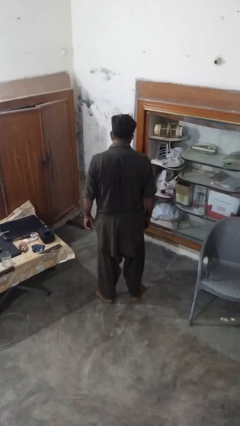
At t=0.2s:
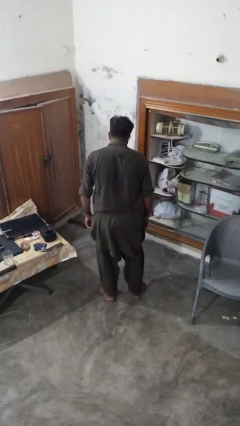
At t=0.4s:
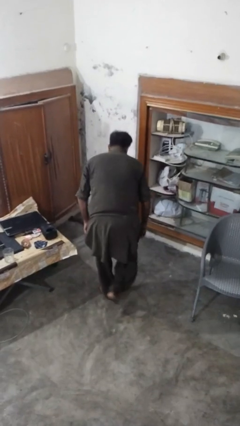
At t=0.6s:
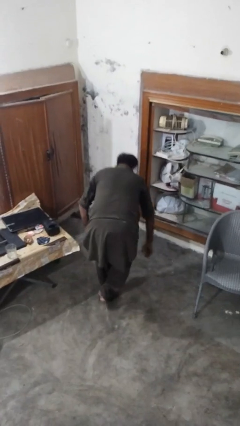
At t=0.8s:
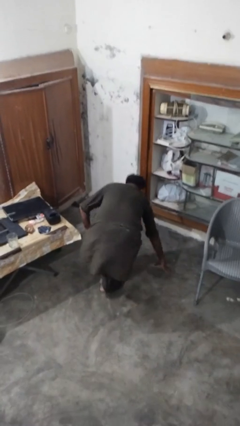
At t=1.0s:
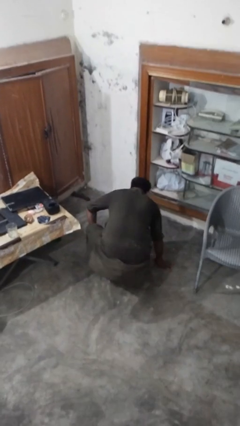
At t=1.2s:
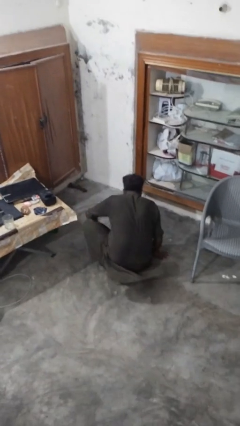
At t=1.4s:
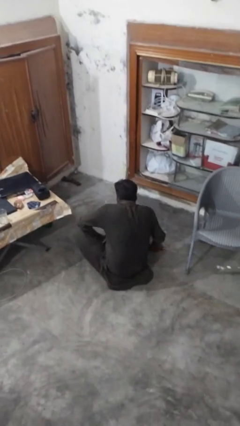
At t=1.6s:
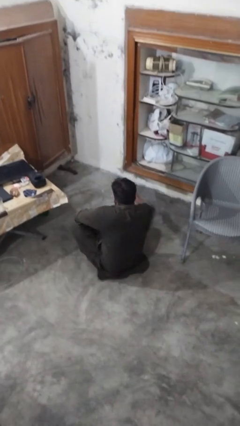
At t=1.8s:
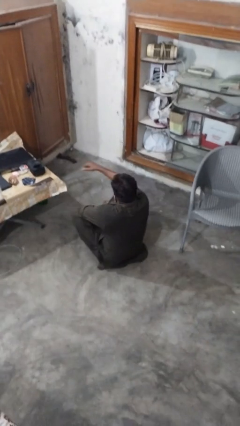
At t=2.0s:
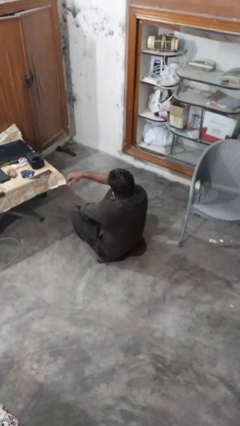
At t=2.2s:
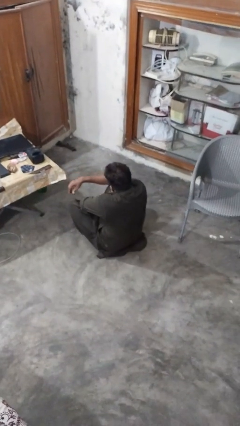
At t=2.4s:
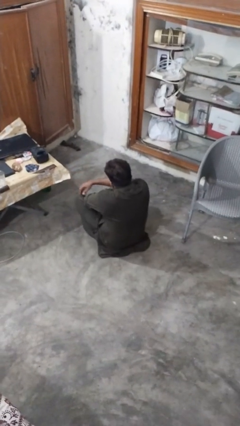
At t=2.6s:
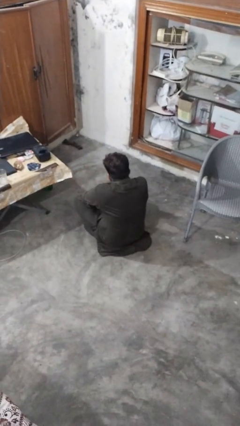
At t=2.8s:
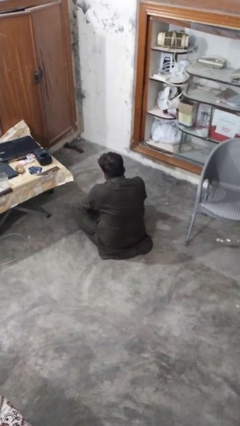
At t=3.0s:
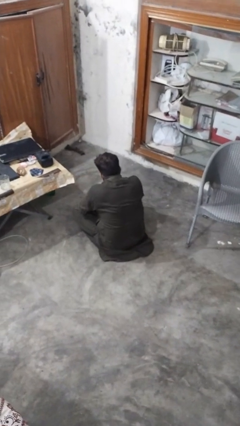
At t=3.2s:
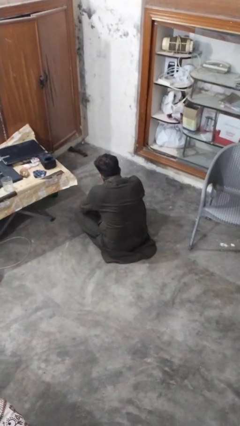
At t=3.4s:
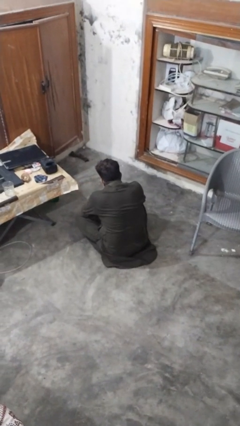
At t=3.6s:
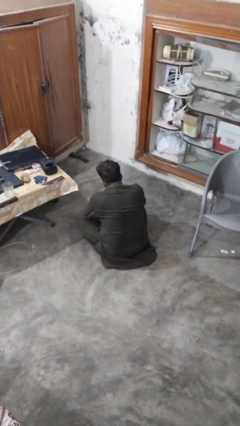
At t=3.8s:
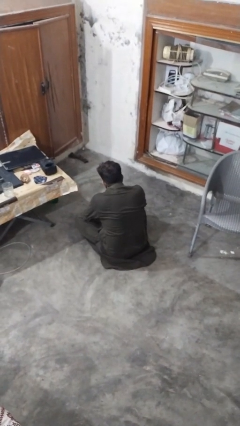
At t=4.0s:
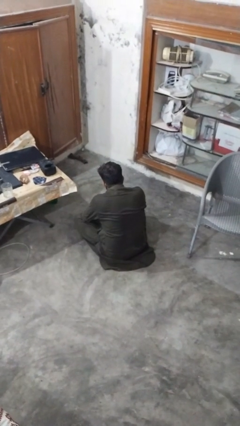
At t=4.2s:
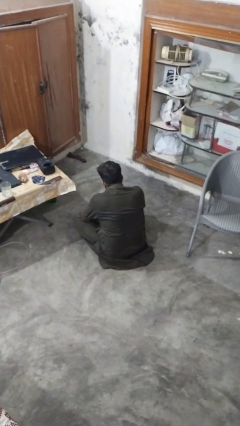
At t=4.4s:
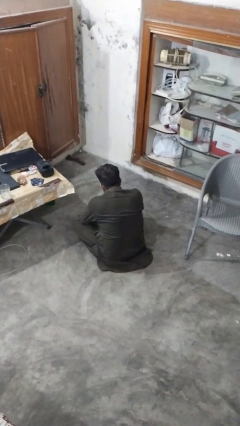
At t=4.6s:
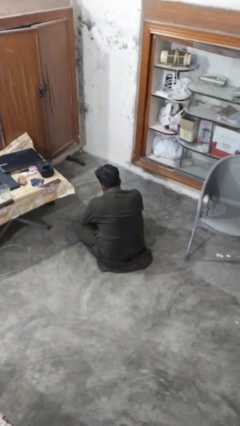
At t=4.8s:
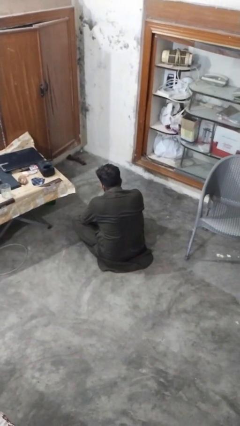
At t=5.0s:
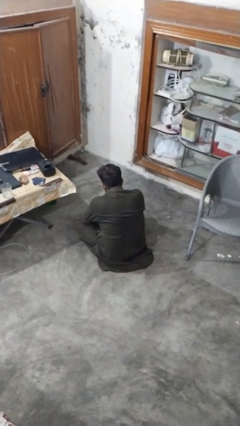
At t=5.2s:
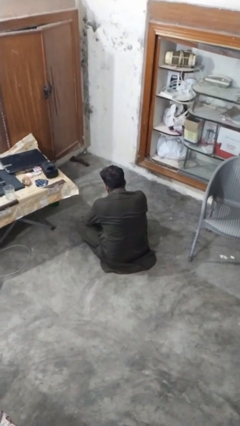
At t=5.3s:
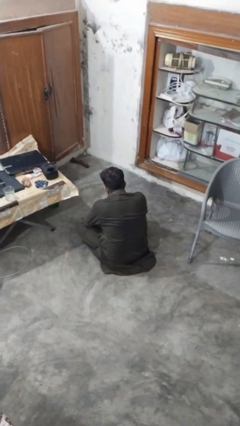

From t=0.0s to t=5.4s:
person sits crisscross

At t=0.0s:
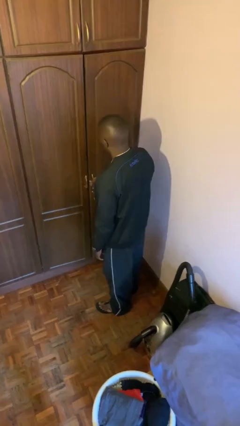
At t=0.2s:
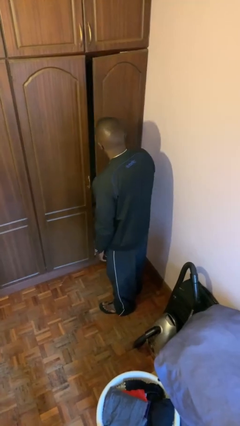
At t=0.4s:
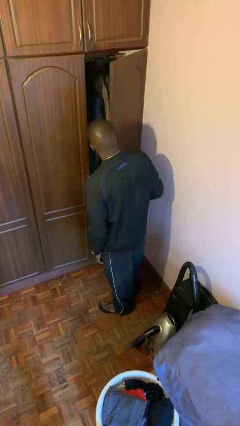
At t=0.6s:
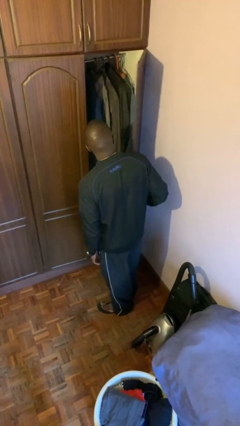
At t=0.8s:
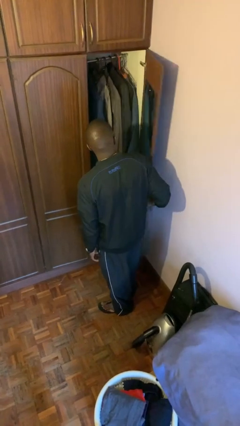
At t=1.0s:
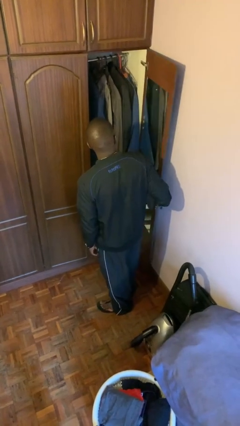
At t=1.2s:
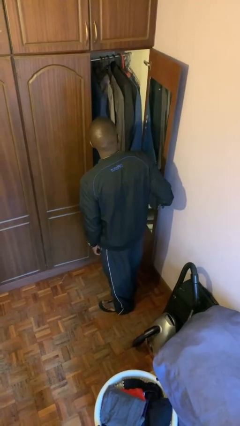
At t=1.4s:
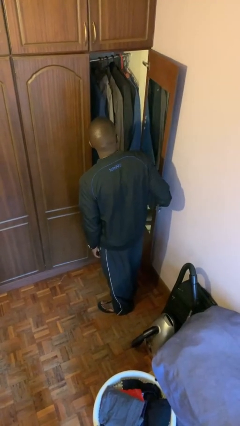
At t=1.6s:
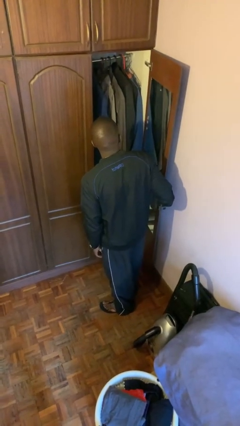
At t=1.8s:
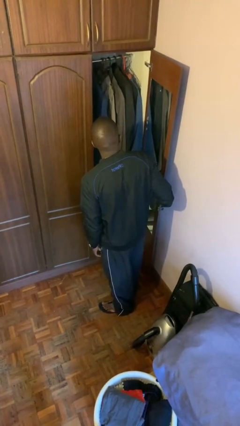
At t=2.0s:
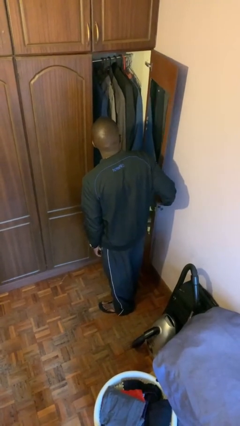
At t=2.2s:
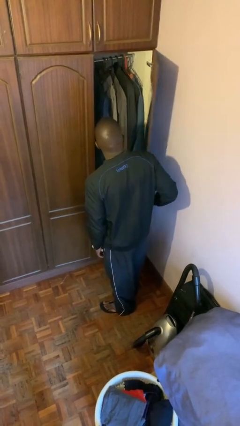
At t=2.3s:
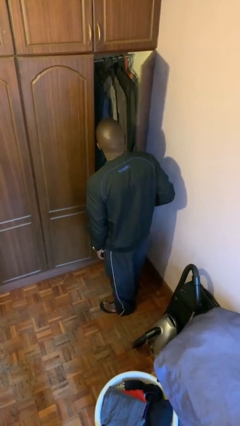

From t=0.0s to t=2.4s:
person opens closet door

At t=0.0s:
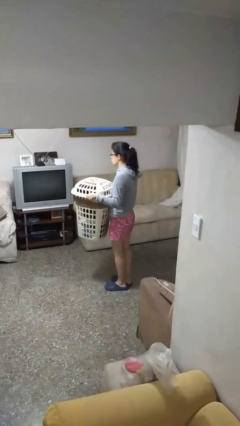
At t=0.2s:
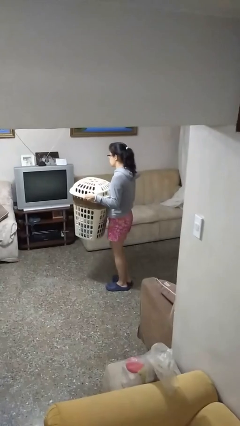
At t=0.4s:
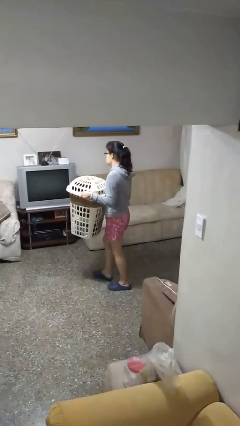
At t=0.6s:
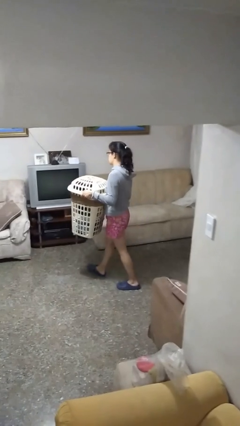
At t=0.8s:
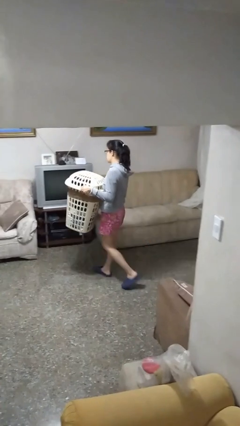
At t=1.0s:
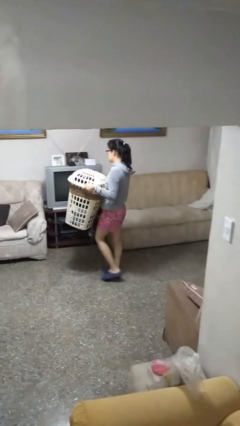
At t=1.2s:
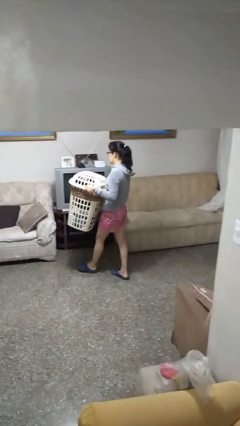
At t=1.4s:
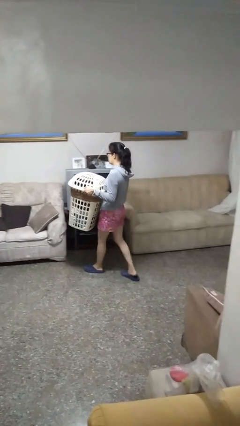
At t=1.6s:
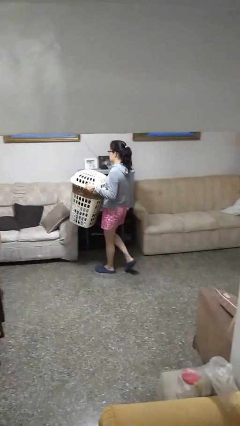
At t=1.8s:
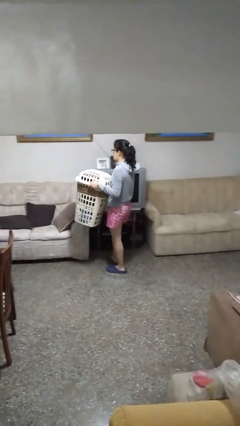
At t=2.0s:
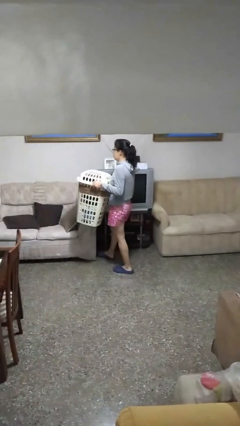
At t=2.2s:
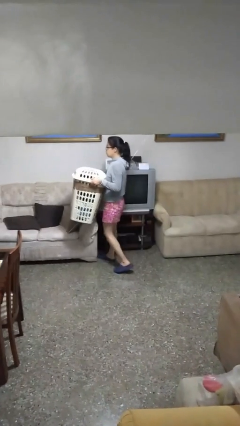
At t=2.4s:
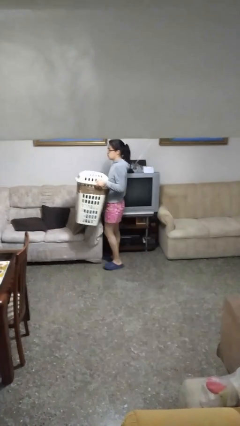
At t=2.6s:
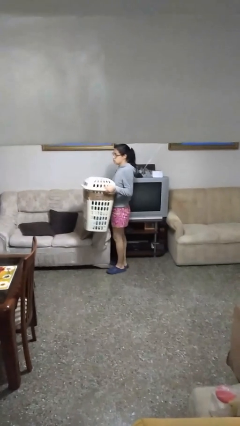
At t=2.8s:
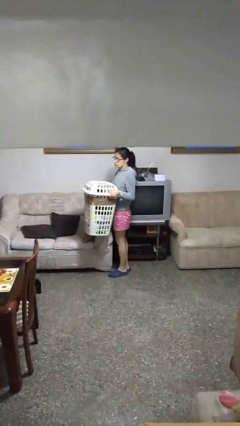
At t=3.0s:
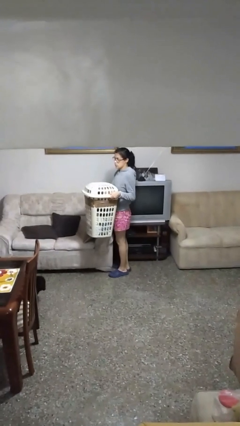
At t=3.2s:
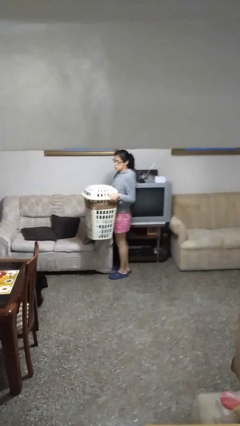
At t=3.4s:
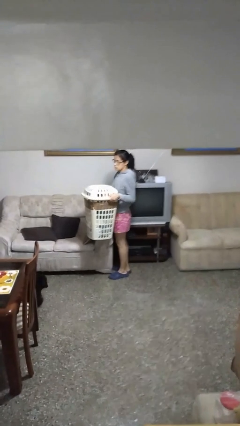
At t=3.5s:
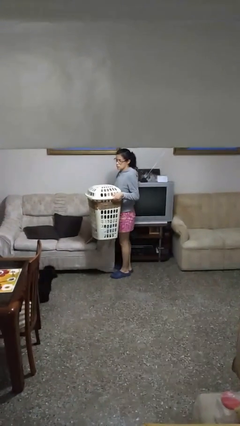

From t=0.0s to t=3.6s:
person carries laundry basket

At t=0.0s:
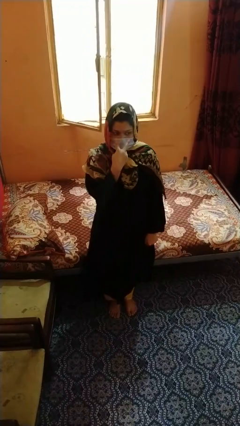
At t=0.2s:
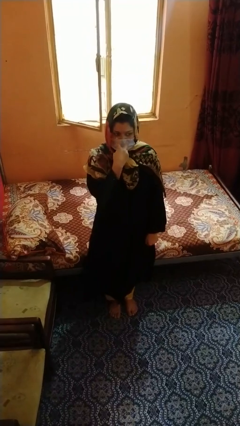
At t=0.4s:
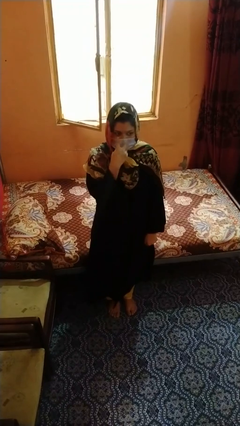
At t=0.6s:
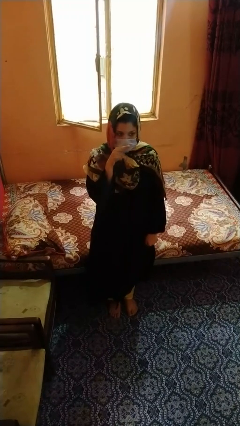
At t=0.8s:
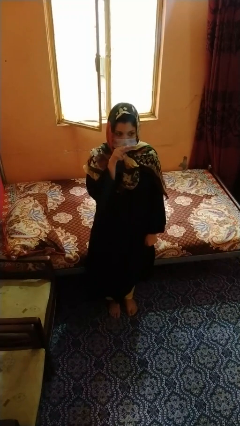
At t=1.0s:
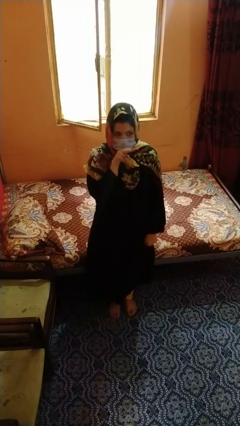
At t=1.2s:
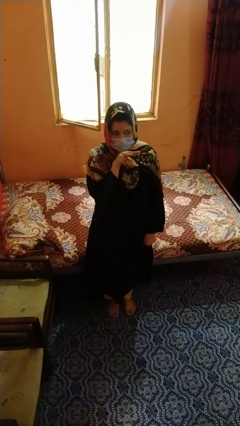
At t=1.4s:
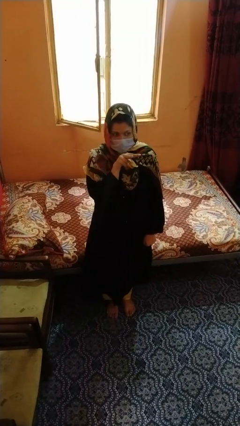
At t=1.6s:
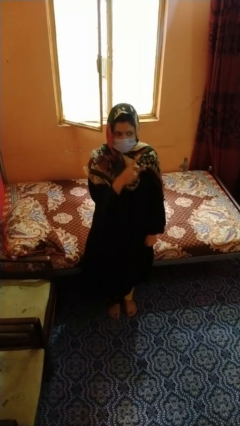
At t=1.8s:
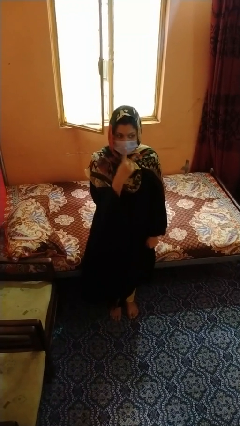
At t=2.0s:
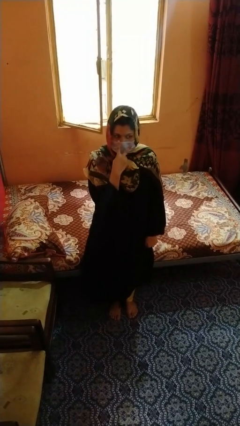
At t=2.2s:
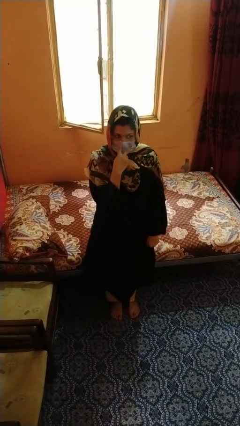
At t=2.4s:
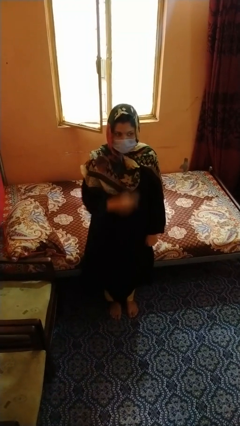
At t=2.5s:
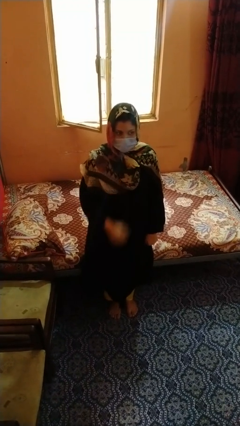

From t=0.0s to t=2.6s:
person gestures watch closely

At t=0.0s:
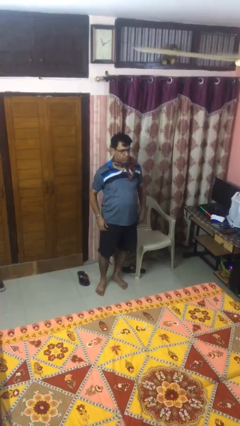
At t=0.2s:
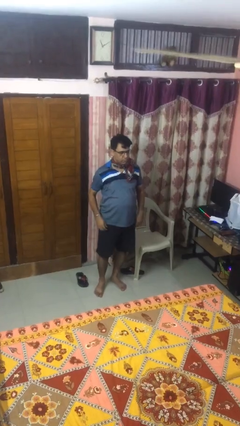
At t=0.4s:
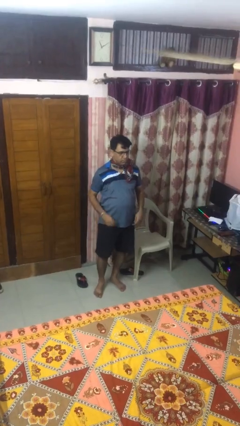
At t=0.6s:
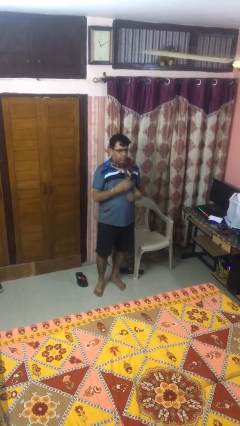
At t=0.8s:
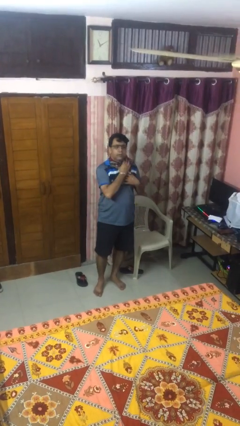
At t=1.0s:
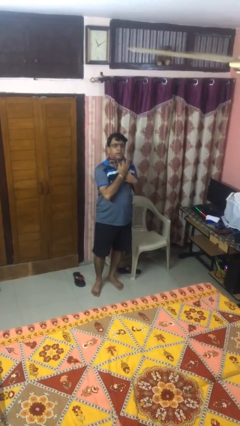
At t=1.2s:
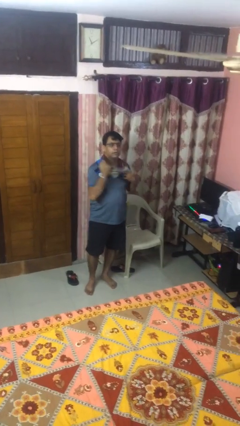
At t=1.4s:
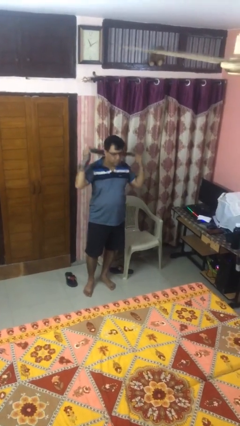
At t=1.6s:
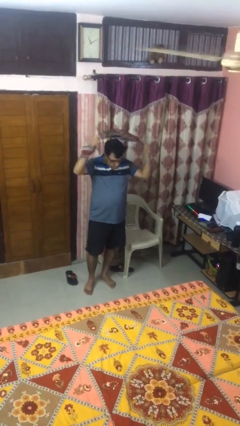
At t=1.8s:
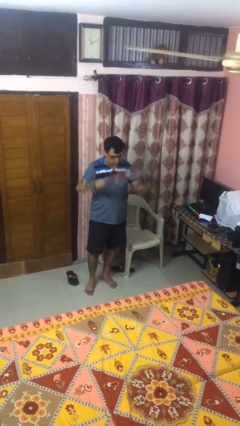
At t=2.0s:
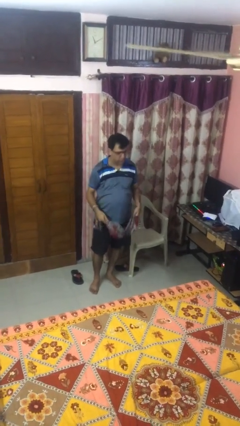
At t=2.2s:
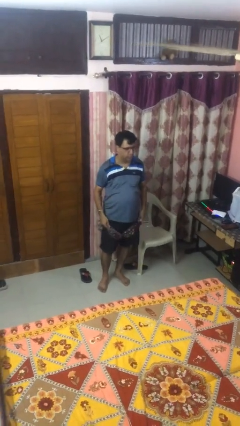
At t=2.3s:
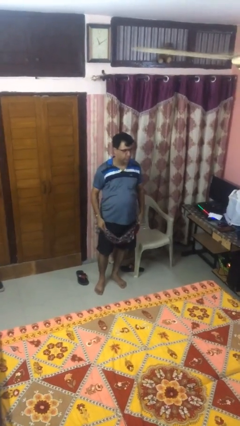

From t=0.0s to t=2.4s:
person takes off scarf

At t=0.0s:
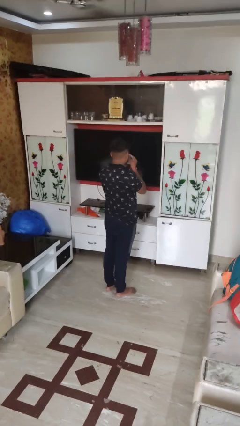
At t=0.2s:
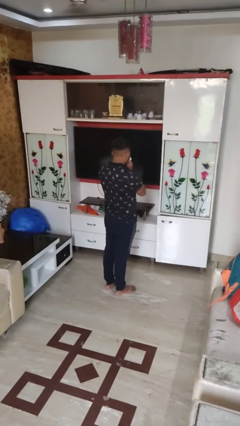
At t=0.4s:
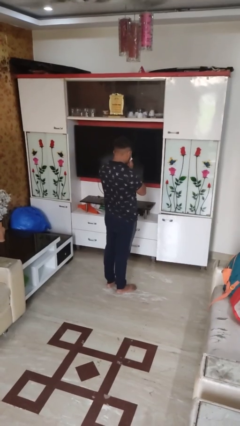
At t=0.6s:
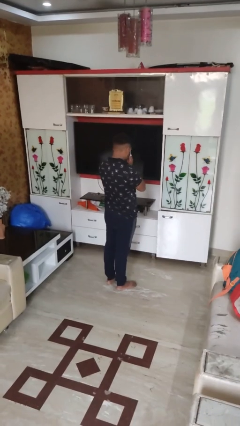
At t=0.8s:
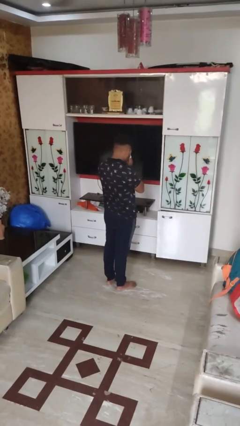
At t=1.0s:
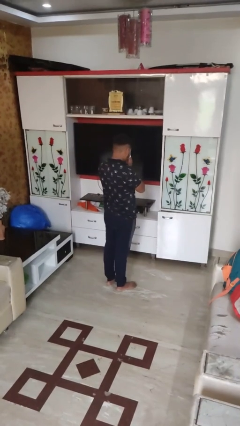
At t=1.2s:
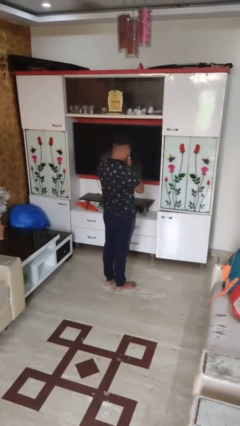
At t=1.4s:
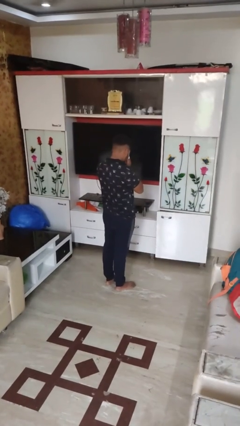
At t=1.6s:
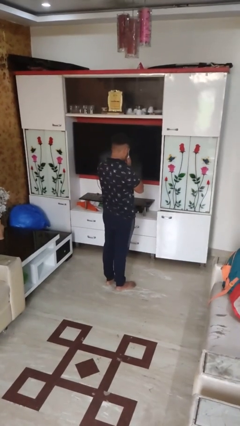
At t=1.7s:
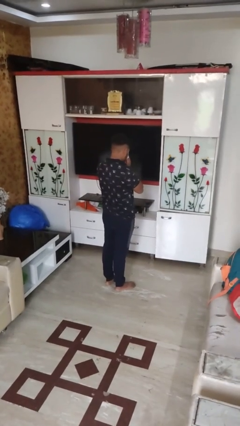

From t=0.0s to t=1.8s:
person blows nose
